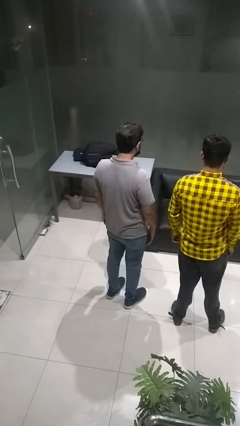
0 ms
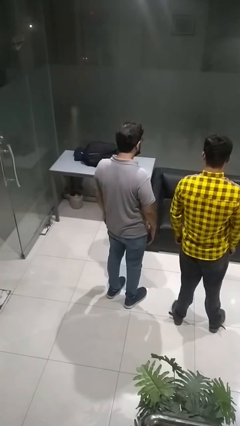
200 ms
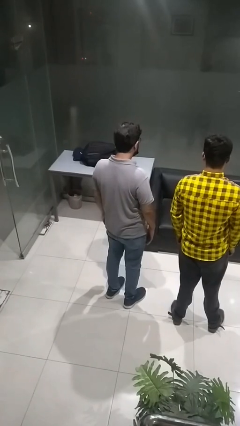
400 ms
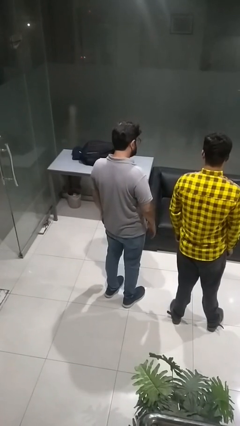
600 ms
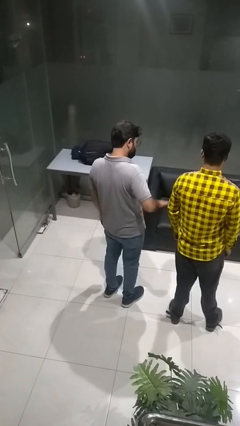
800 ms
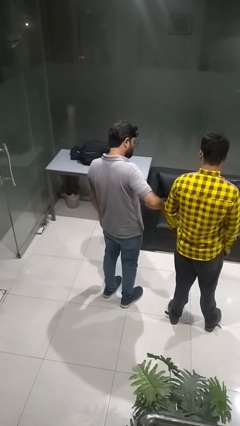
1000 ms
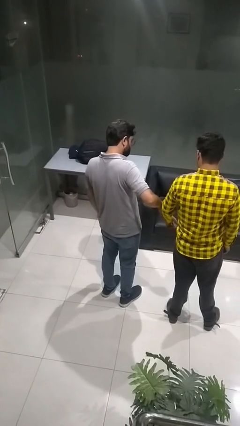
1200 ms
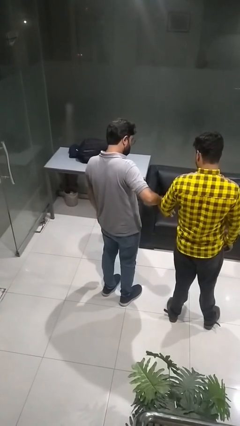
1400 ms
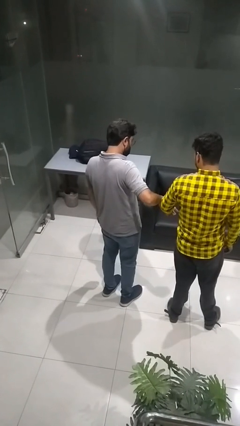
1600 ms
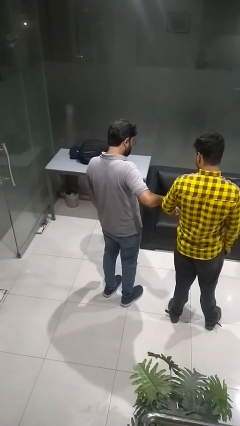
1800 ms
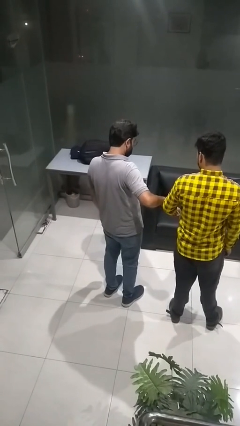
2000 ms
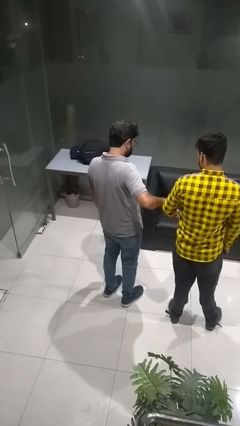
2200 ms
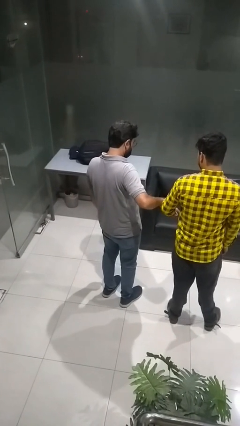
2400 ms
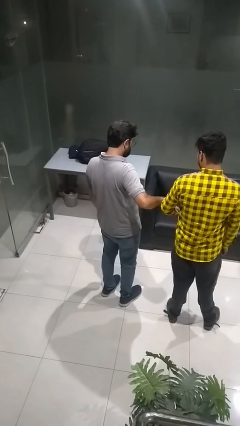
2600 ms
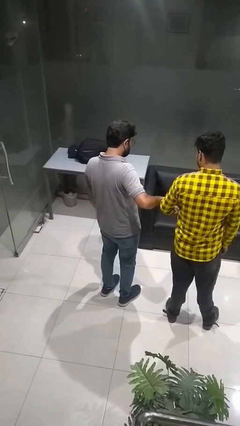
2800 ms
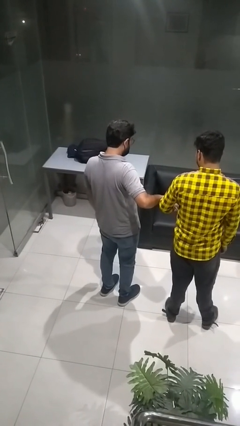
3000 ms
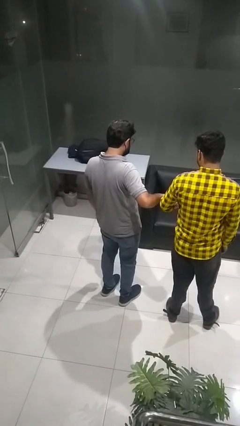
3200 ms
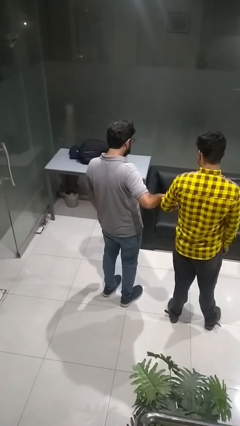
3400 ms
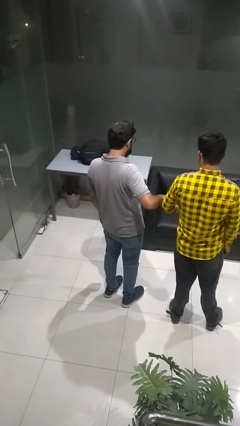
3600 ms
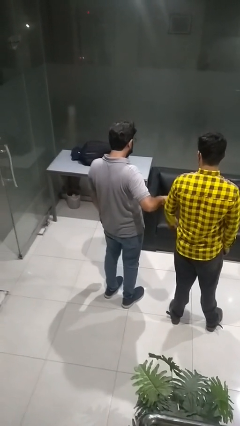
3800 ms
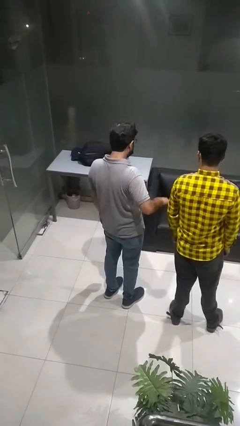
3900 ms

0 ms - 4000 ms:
person grabs person by forearm

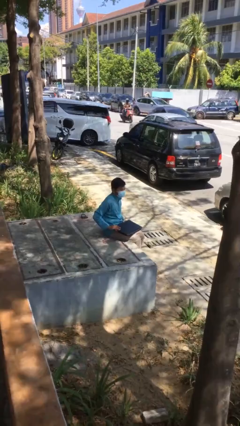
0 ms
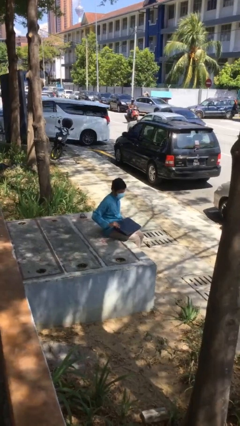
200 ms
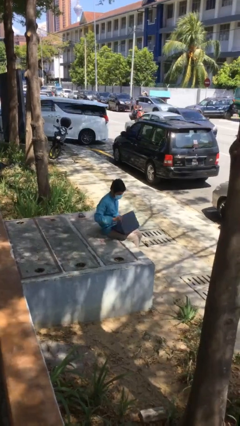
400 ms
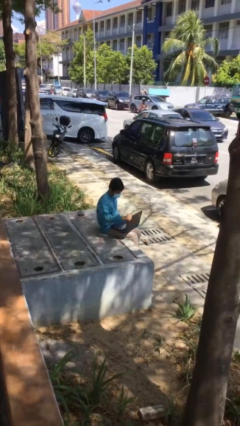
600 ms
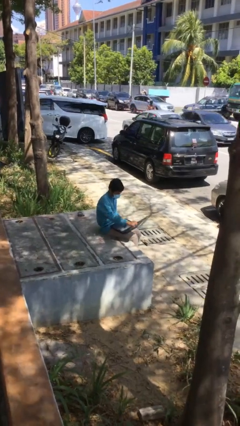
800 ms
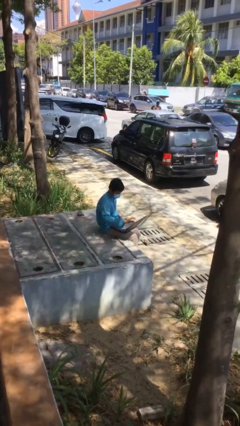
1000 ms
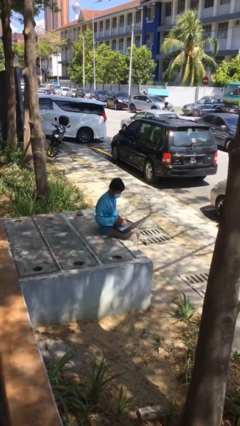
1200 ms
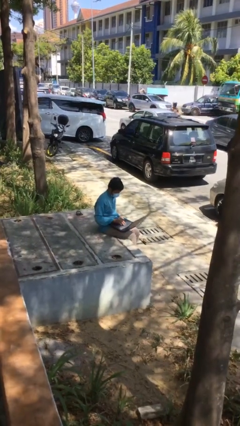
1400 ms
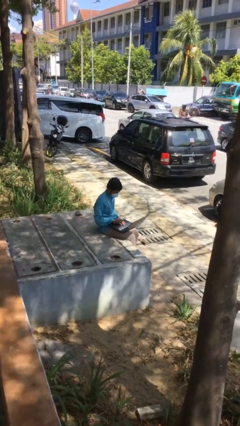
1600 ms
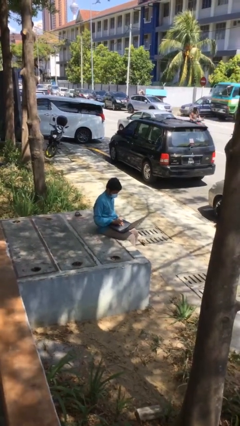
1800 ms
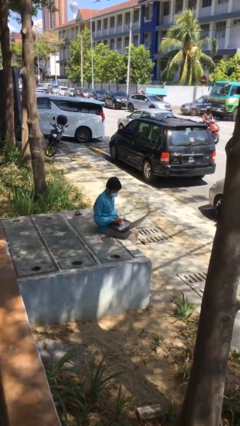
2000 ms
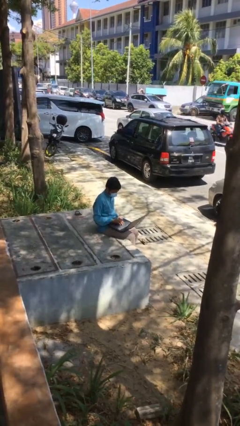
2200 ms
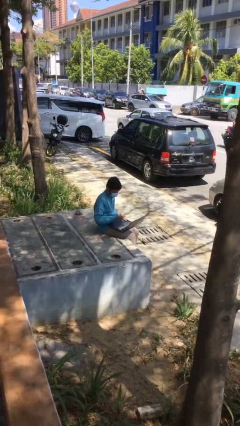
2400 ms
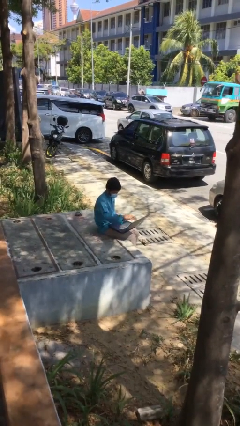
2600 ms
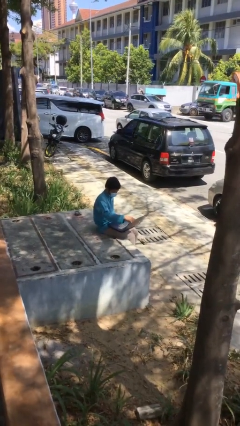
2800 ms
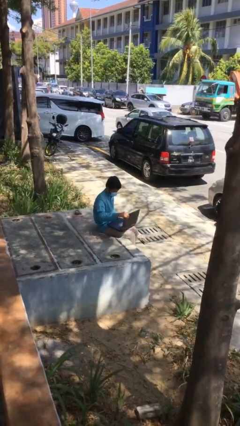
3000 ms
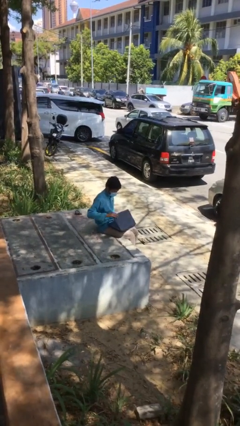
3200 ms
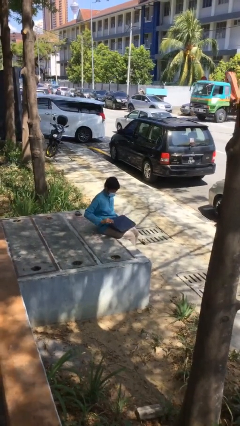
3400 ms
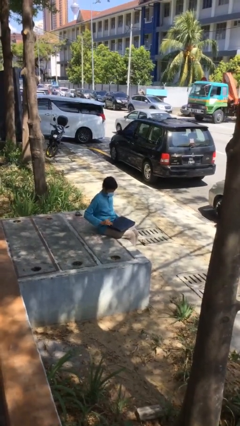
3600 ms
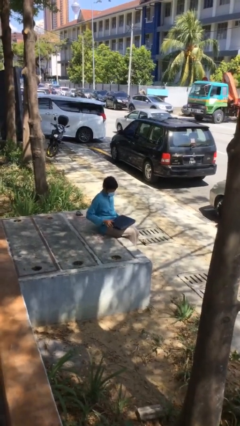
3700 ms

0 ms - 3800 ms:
person interacts with laptop

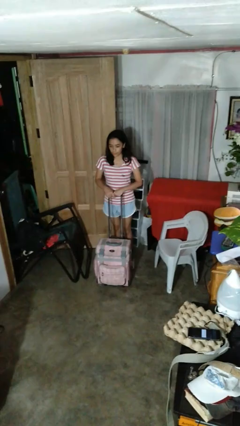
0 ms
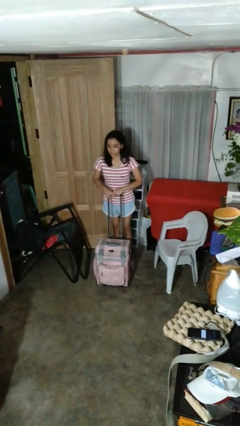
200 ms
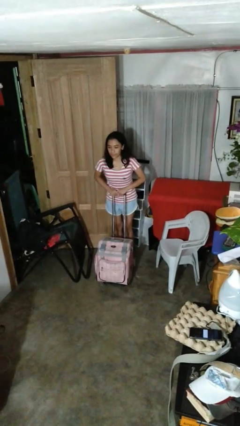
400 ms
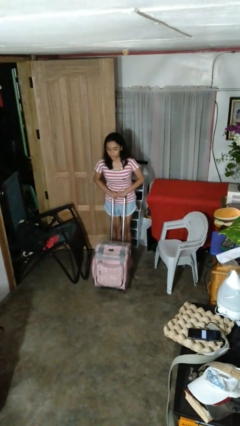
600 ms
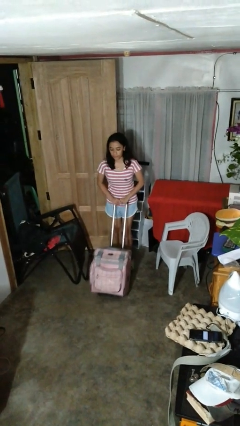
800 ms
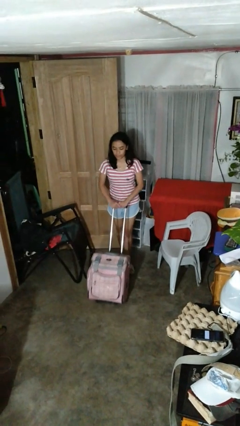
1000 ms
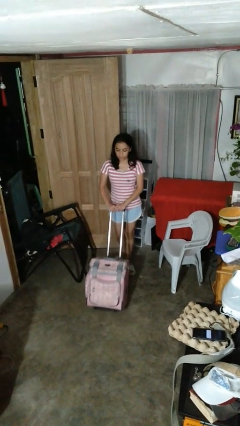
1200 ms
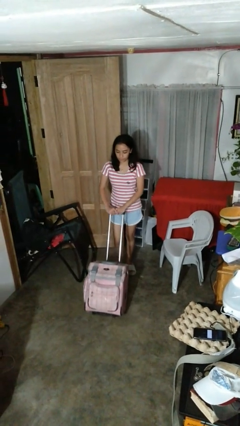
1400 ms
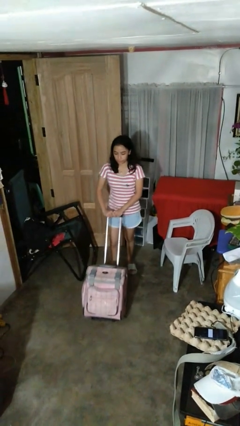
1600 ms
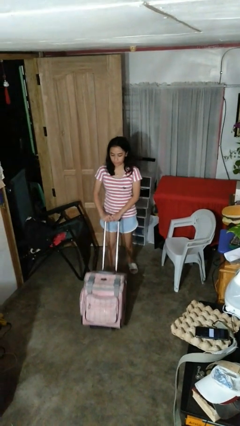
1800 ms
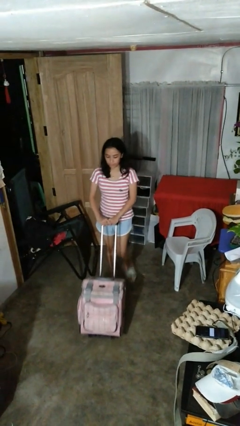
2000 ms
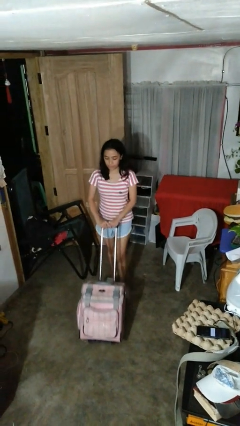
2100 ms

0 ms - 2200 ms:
person pushes wheeled cart

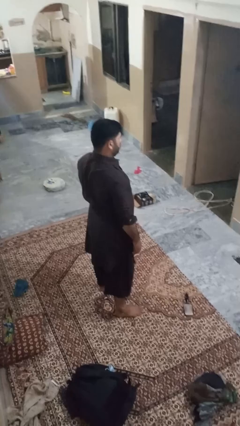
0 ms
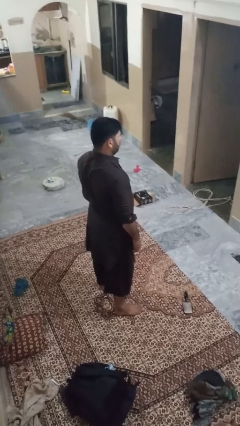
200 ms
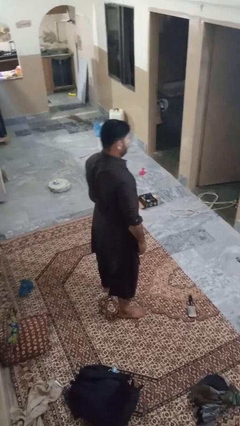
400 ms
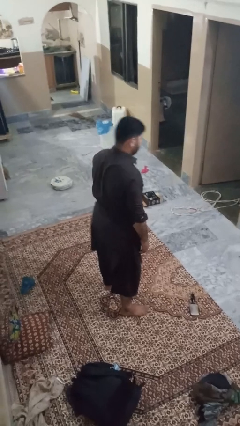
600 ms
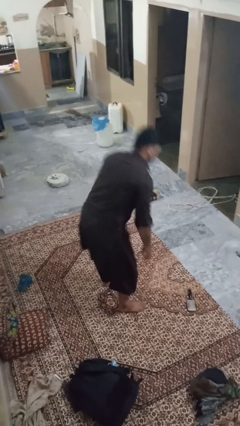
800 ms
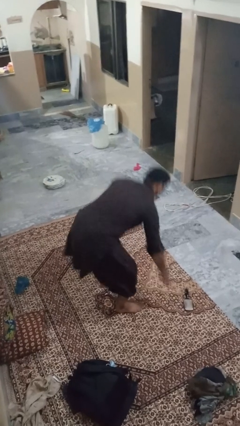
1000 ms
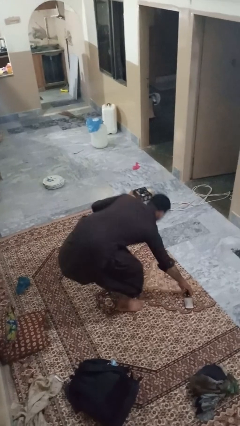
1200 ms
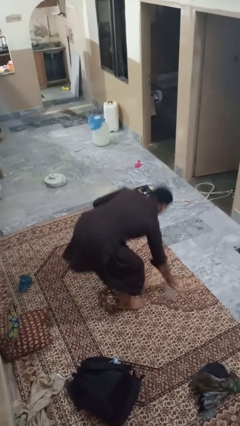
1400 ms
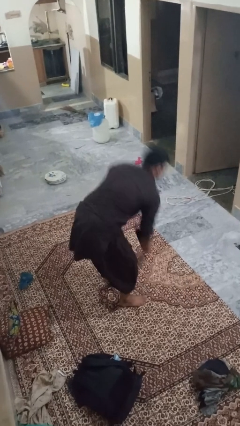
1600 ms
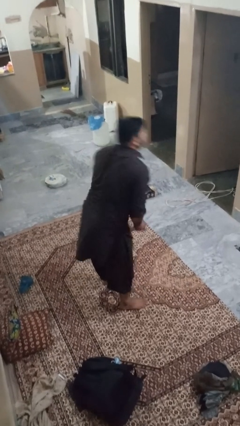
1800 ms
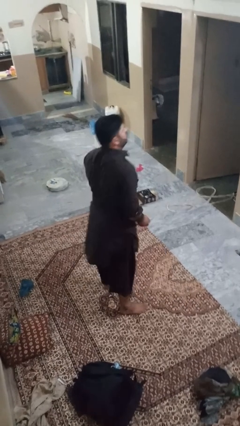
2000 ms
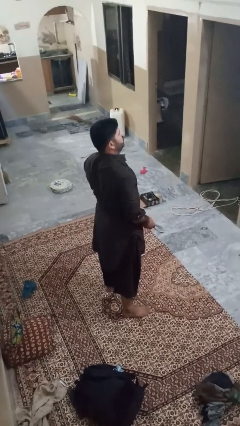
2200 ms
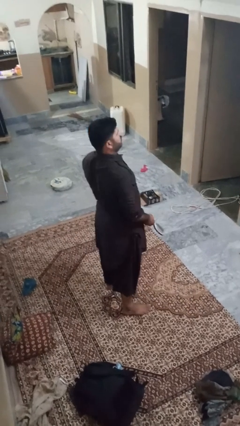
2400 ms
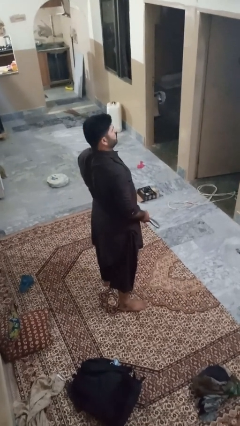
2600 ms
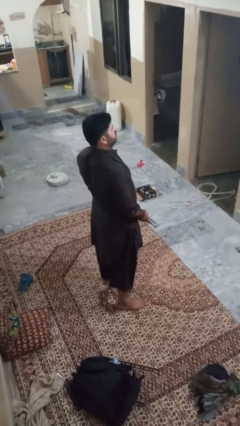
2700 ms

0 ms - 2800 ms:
person picks up object from floor

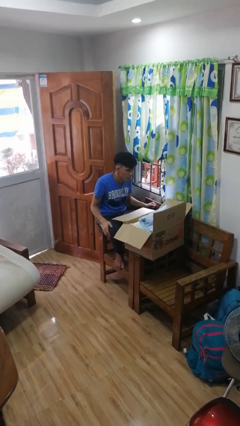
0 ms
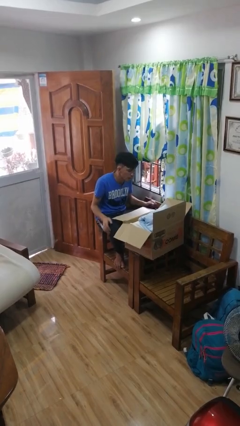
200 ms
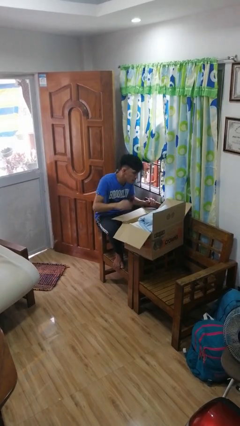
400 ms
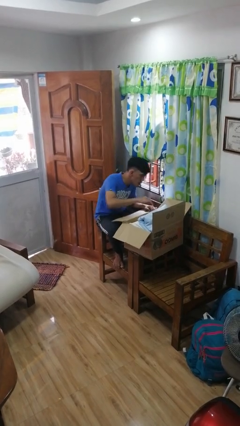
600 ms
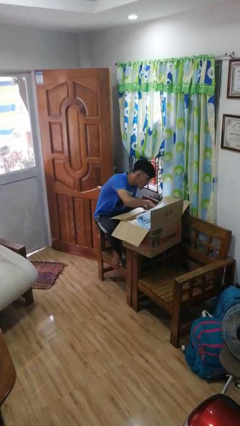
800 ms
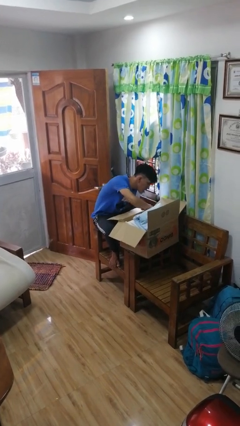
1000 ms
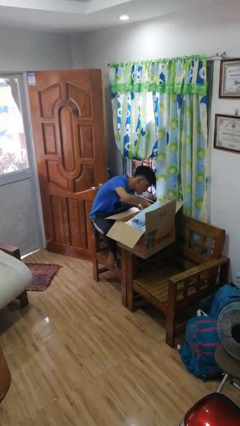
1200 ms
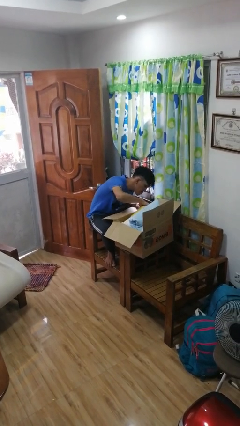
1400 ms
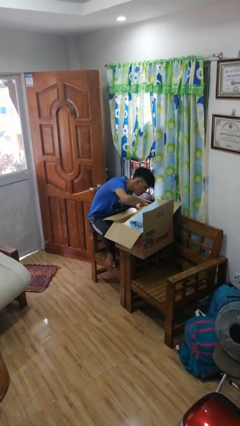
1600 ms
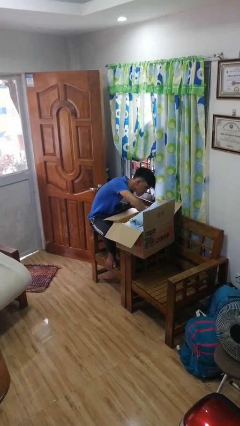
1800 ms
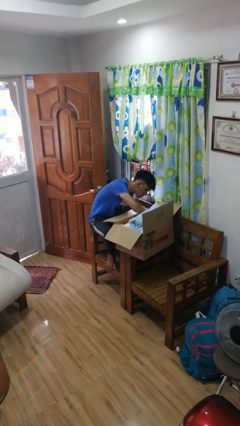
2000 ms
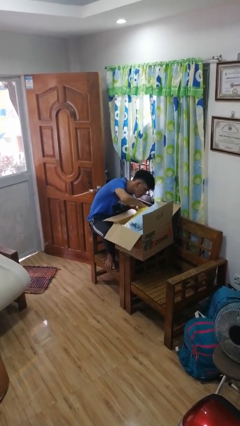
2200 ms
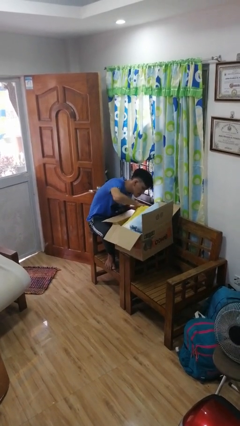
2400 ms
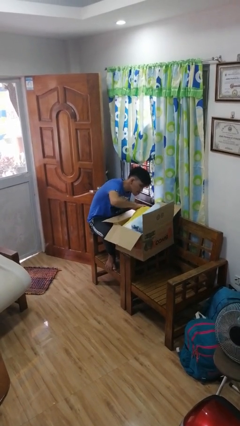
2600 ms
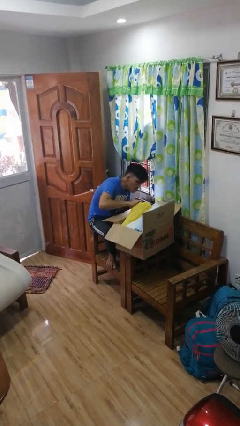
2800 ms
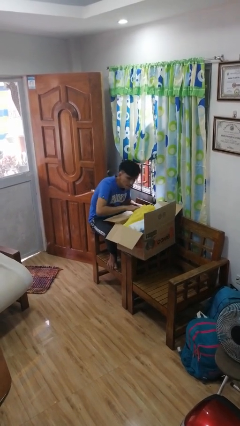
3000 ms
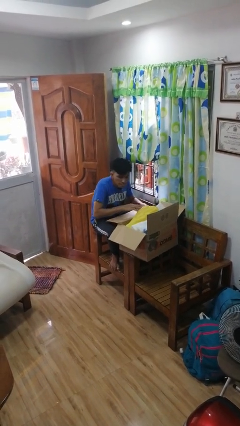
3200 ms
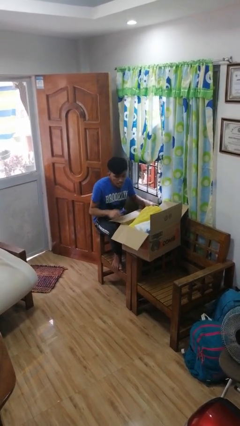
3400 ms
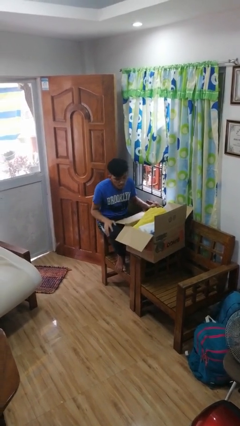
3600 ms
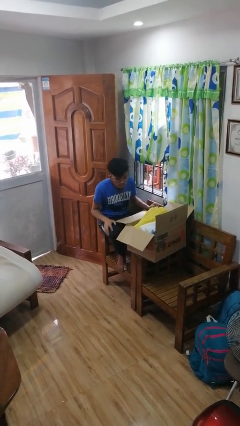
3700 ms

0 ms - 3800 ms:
person searches in box

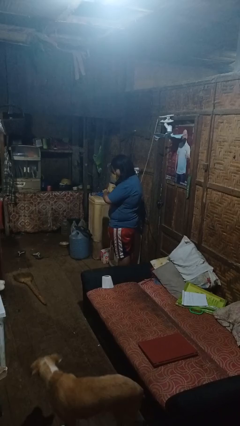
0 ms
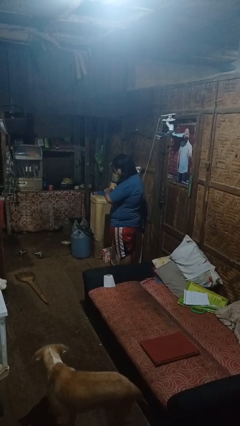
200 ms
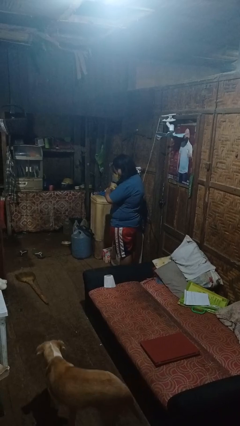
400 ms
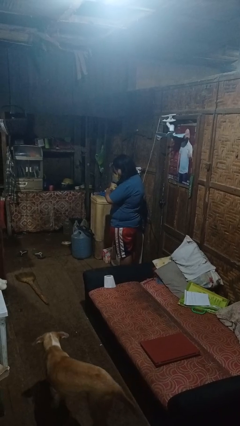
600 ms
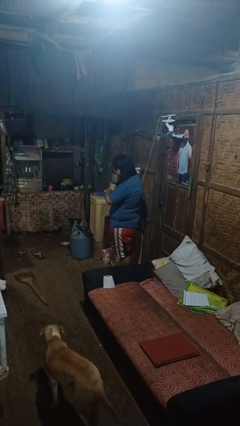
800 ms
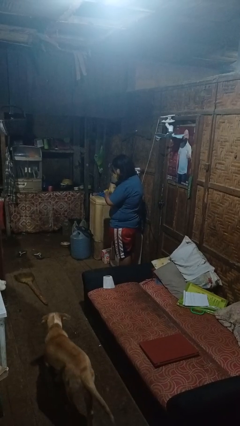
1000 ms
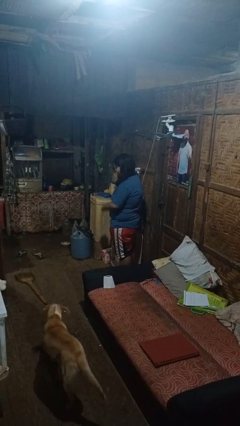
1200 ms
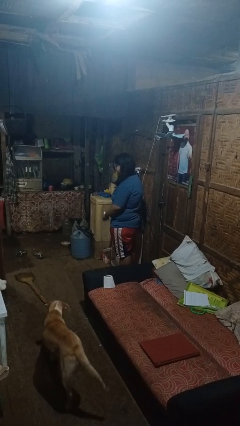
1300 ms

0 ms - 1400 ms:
person looks at wristwatch
